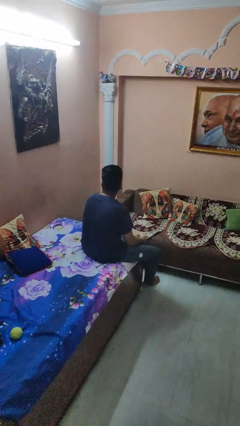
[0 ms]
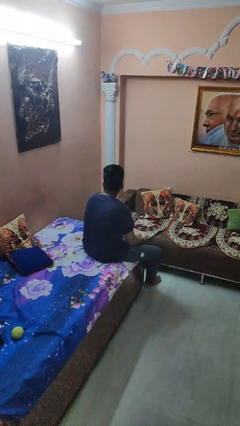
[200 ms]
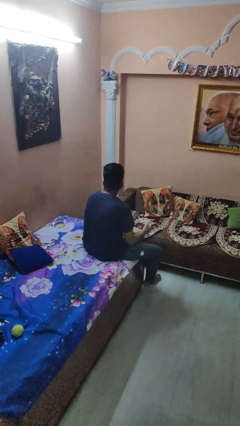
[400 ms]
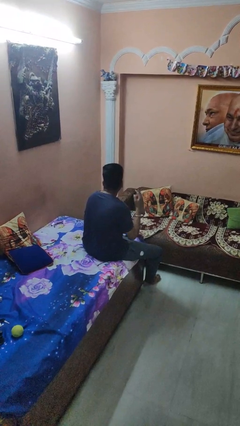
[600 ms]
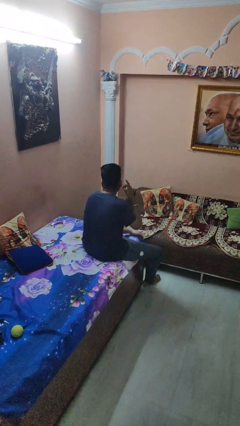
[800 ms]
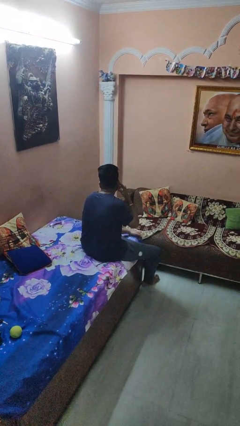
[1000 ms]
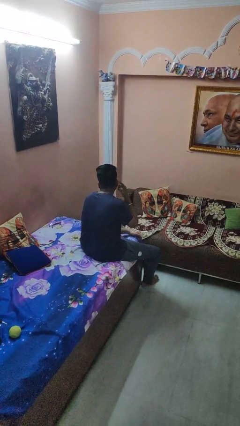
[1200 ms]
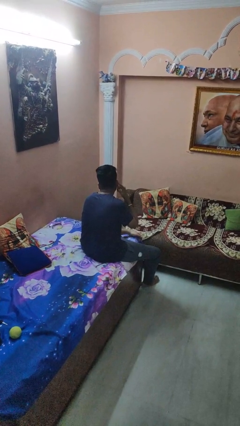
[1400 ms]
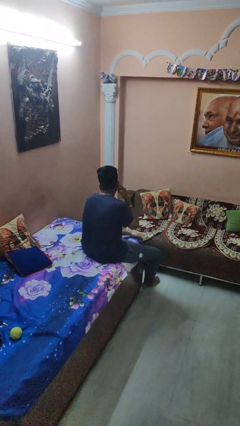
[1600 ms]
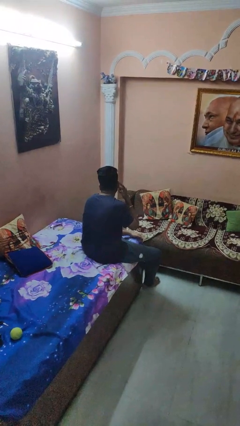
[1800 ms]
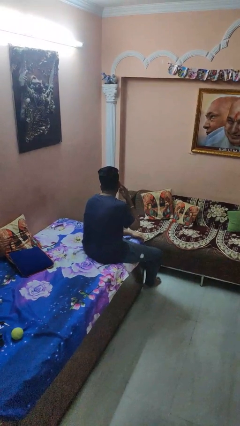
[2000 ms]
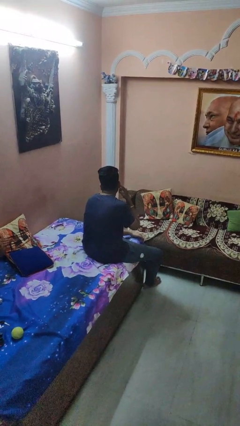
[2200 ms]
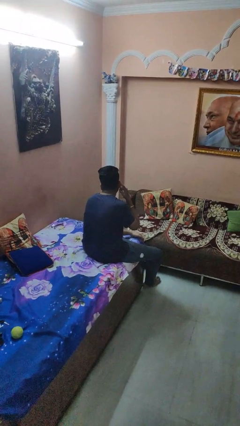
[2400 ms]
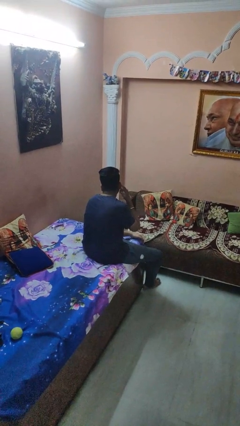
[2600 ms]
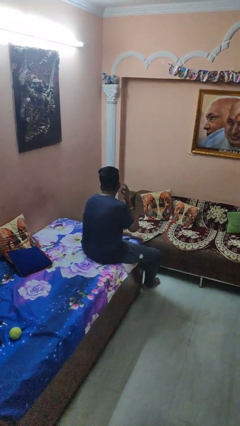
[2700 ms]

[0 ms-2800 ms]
person gestures listen closely

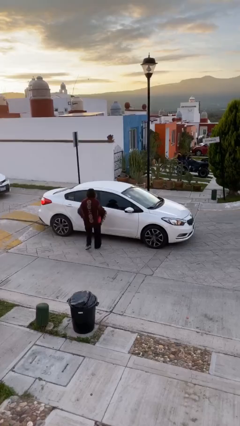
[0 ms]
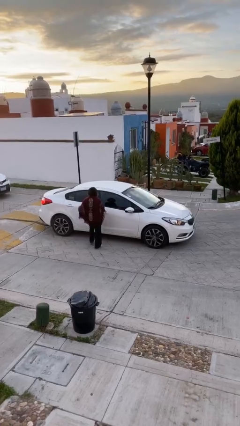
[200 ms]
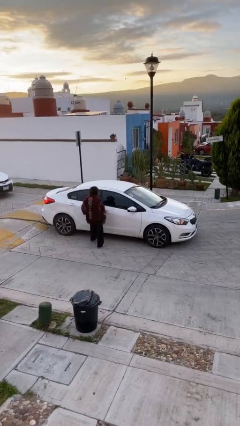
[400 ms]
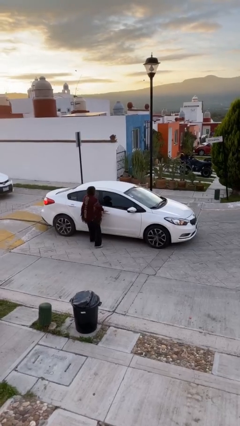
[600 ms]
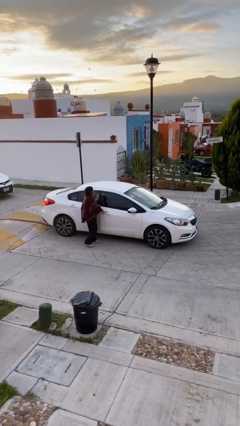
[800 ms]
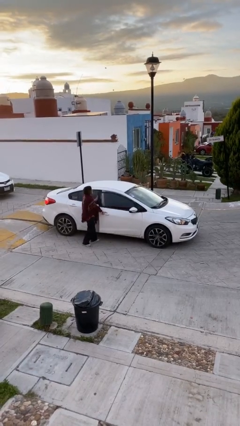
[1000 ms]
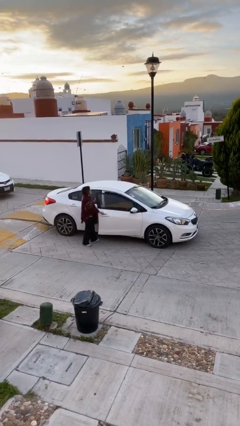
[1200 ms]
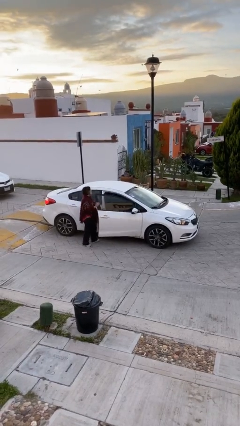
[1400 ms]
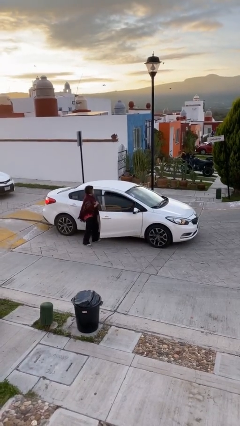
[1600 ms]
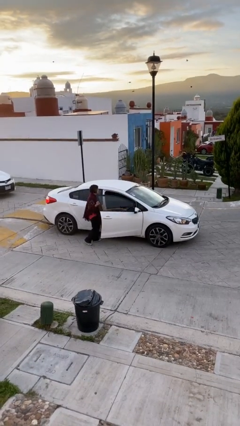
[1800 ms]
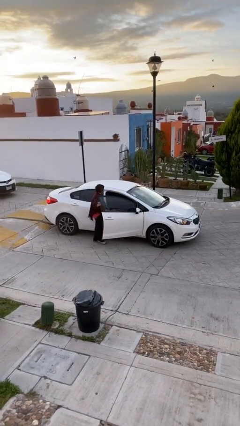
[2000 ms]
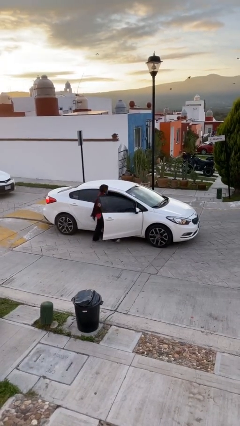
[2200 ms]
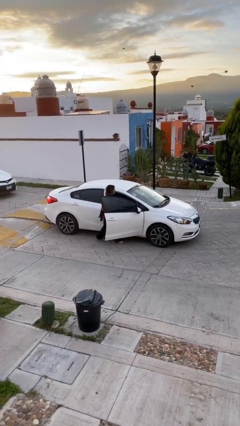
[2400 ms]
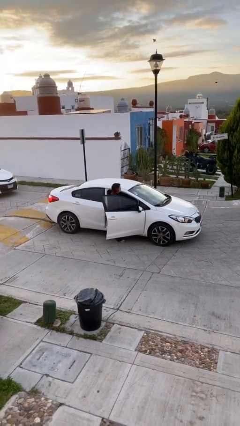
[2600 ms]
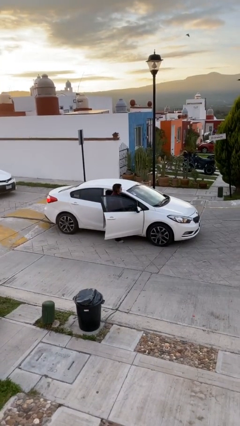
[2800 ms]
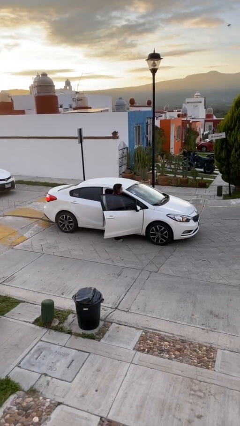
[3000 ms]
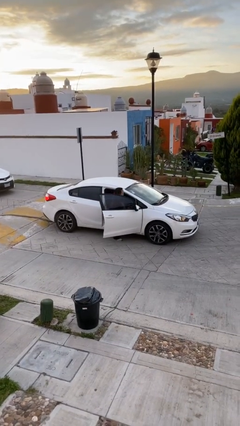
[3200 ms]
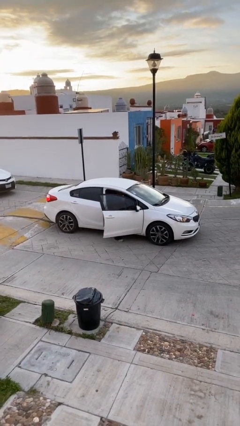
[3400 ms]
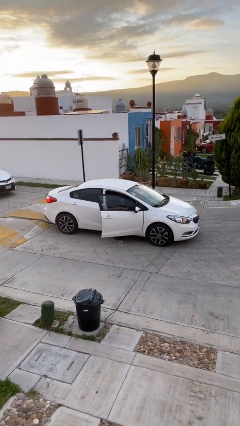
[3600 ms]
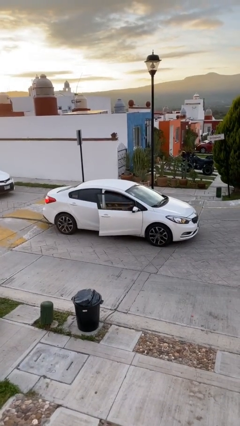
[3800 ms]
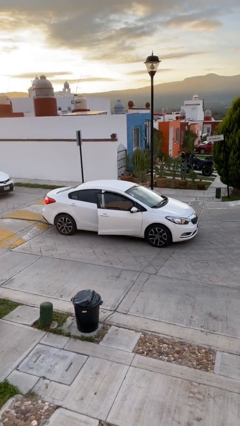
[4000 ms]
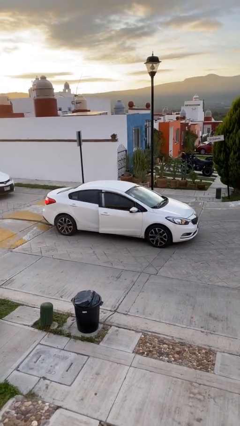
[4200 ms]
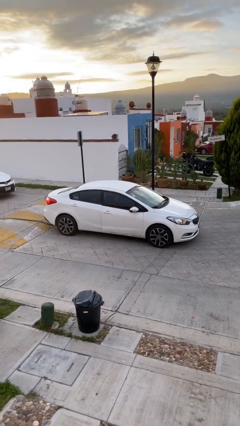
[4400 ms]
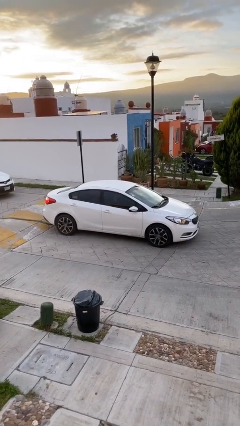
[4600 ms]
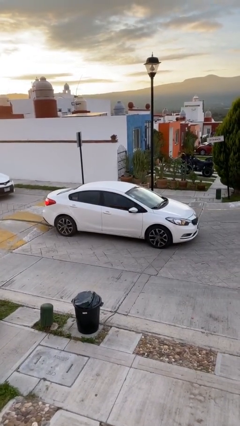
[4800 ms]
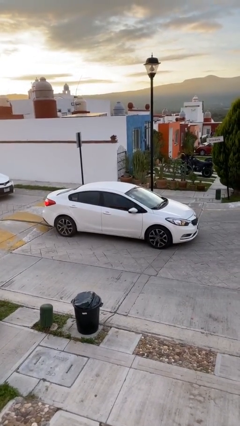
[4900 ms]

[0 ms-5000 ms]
car picks up person

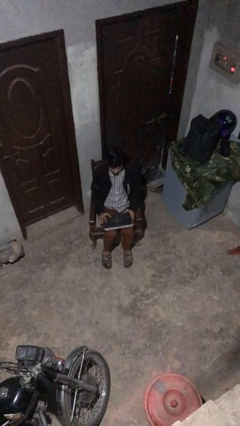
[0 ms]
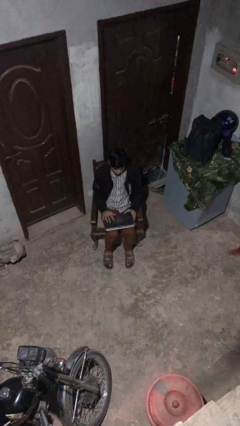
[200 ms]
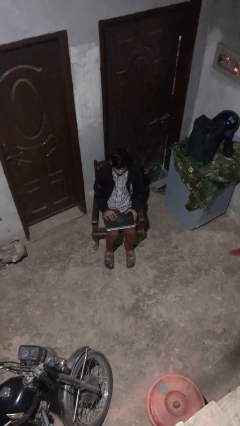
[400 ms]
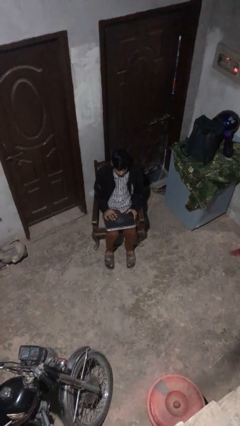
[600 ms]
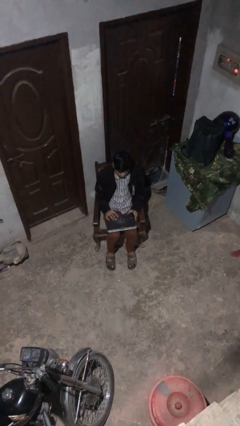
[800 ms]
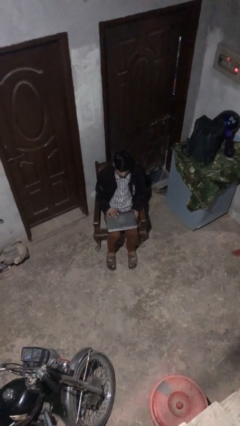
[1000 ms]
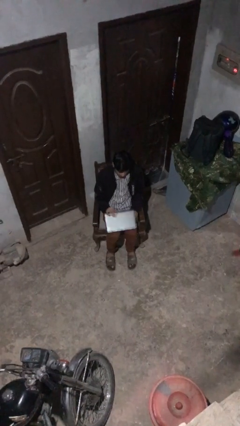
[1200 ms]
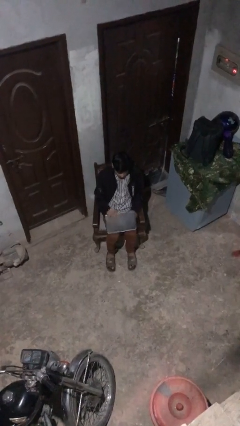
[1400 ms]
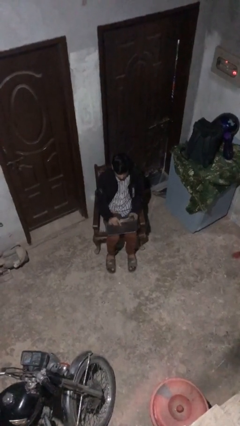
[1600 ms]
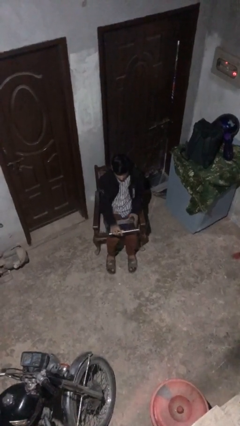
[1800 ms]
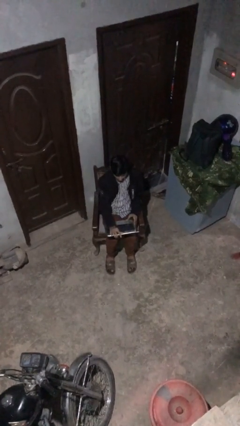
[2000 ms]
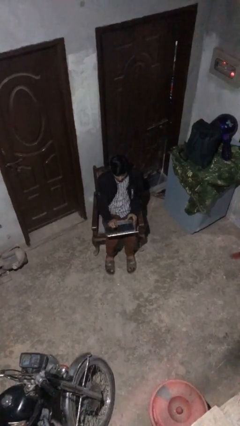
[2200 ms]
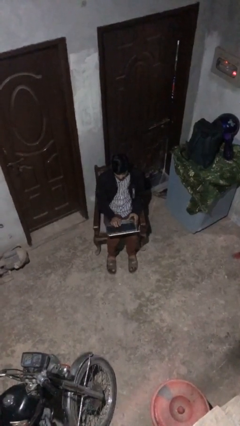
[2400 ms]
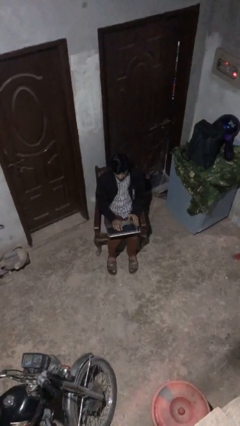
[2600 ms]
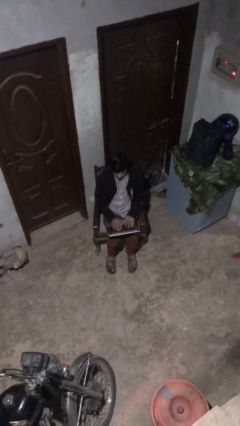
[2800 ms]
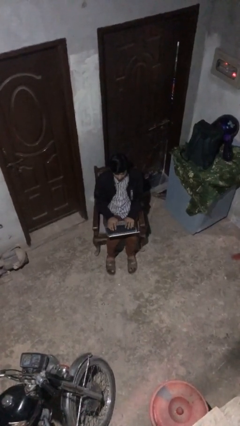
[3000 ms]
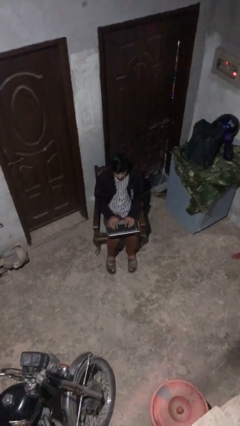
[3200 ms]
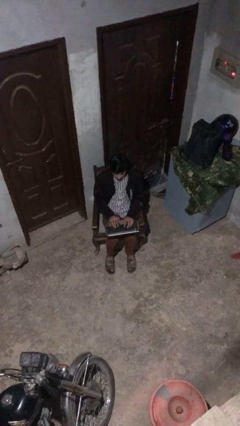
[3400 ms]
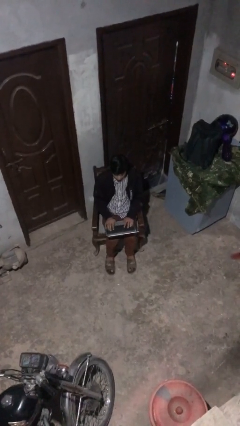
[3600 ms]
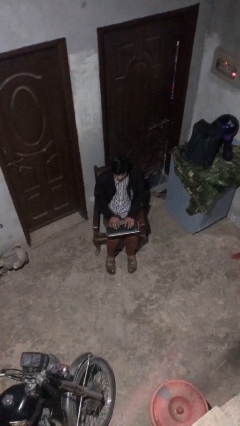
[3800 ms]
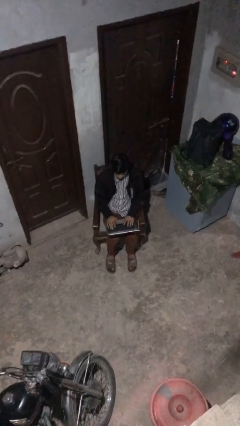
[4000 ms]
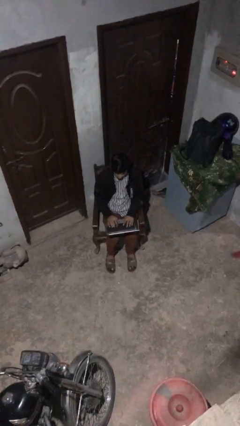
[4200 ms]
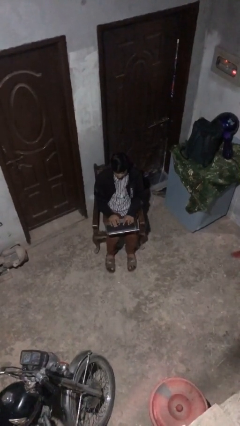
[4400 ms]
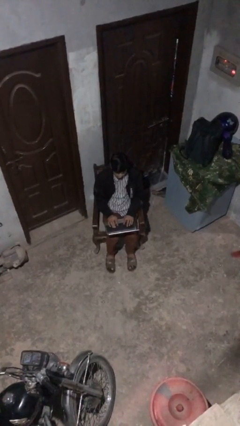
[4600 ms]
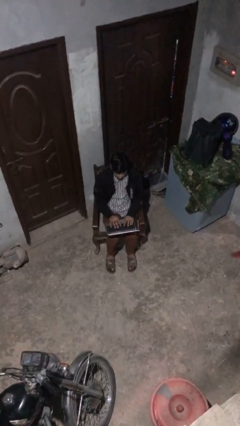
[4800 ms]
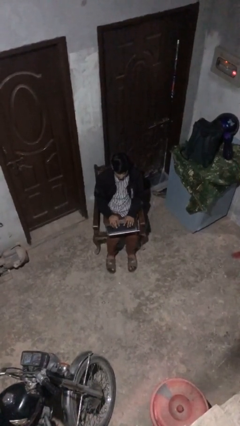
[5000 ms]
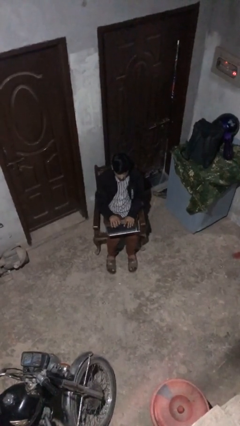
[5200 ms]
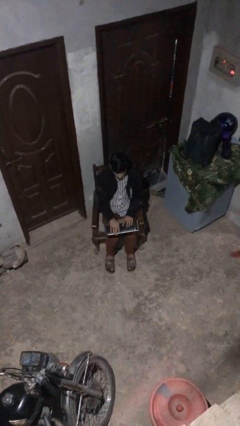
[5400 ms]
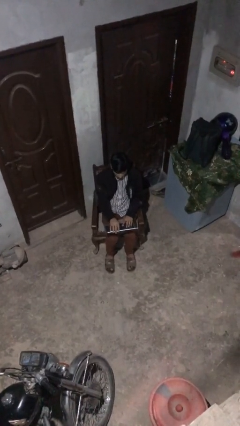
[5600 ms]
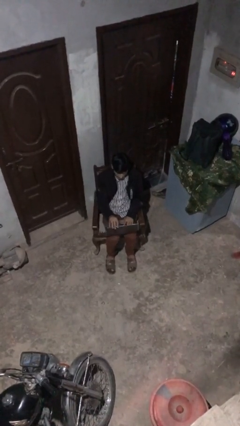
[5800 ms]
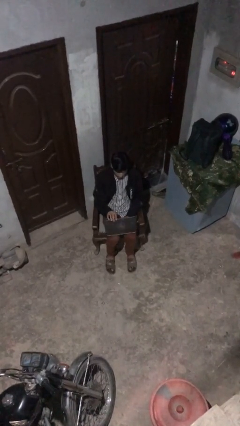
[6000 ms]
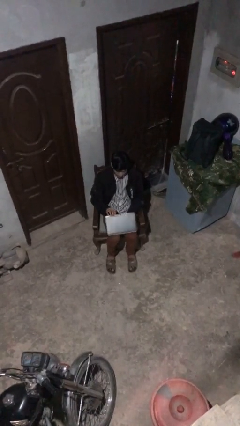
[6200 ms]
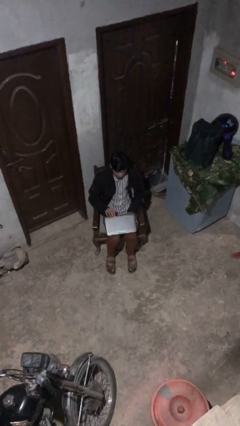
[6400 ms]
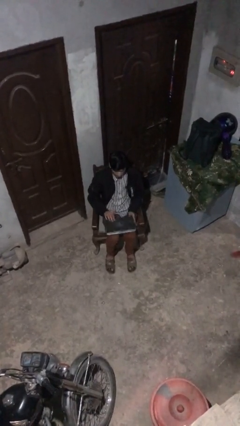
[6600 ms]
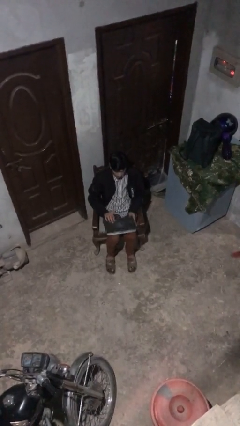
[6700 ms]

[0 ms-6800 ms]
person interacts with laptop

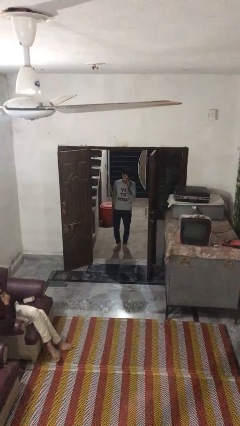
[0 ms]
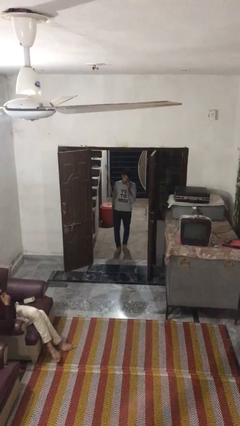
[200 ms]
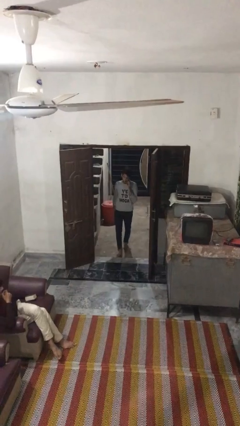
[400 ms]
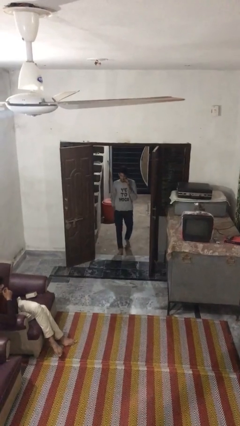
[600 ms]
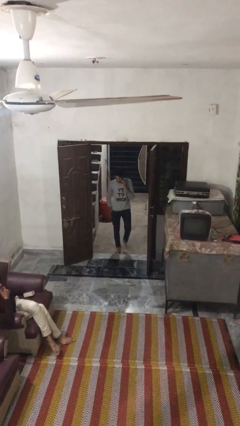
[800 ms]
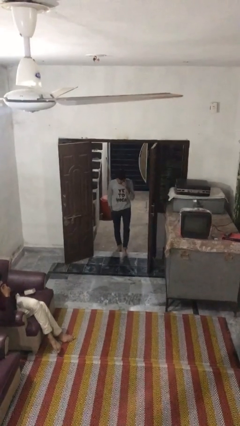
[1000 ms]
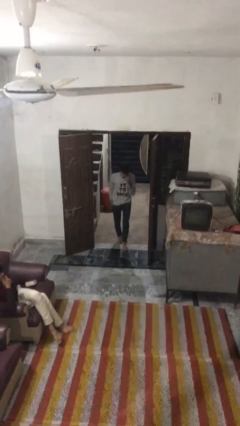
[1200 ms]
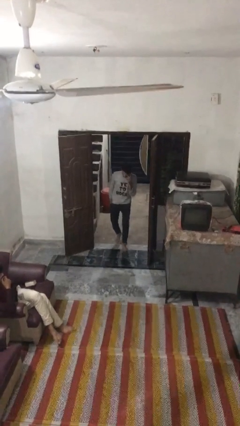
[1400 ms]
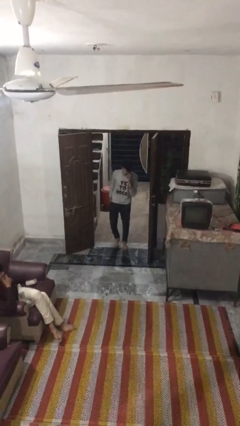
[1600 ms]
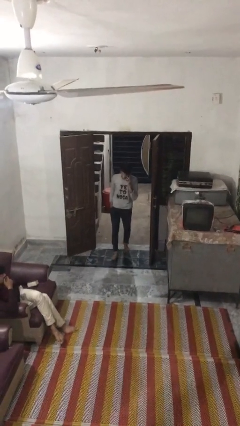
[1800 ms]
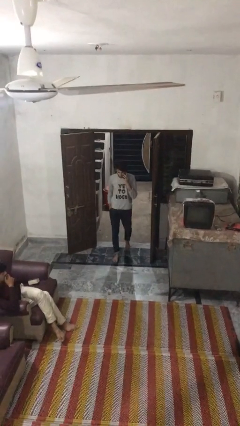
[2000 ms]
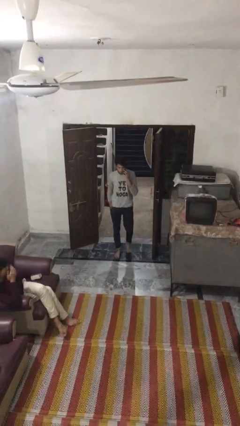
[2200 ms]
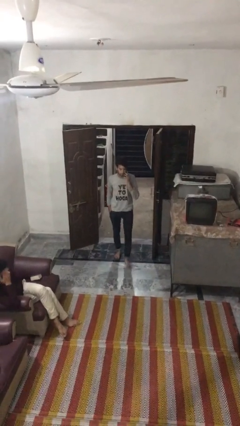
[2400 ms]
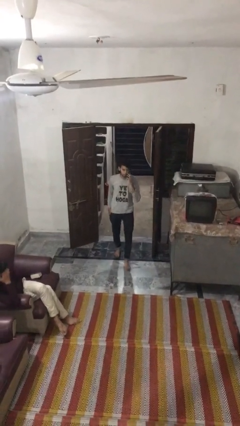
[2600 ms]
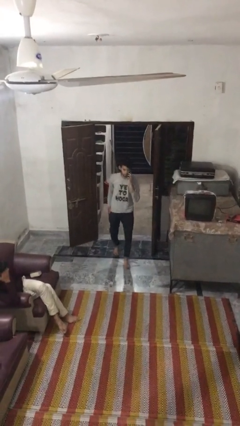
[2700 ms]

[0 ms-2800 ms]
person enters scene through structure

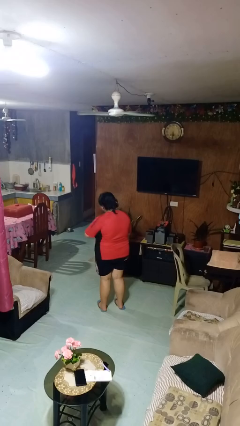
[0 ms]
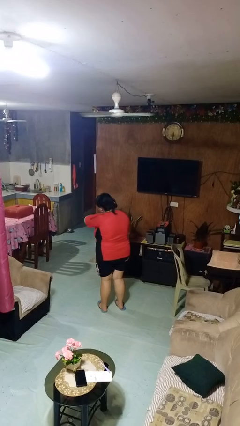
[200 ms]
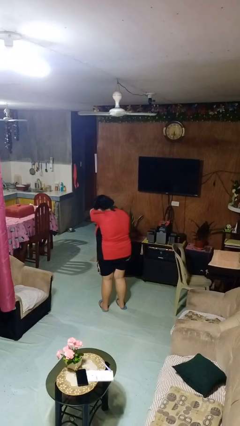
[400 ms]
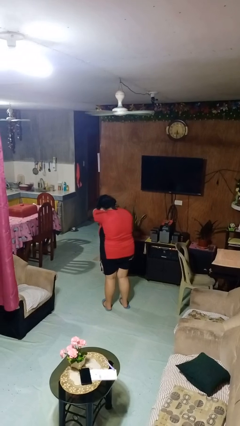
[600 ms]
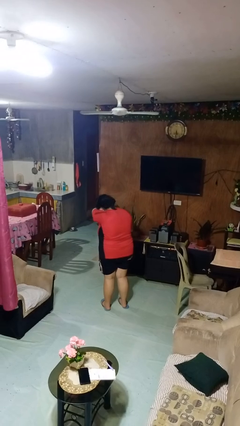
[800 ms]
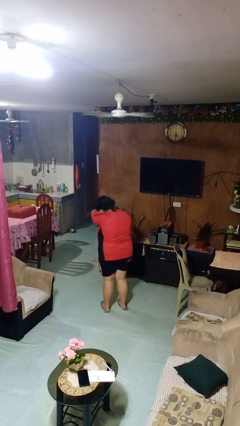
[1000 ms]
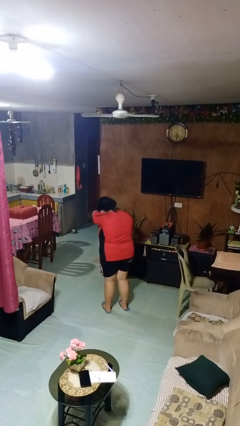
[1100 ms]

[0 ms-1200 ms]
person sneezes into arm
